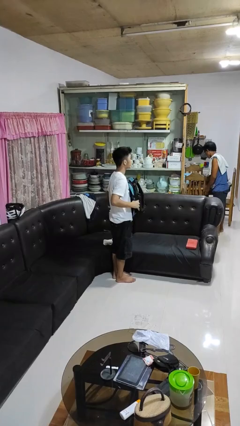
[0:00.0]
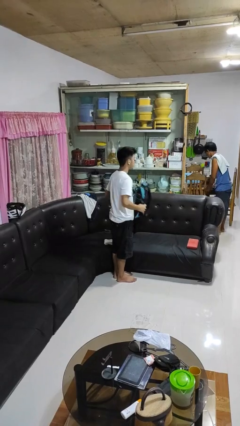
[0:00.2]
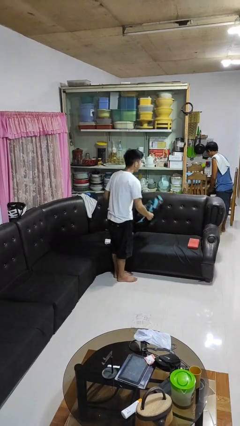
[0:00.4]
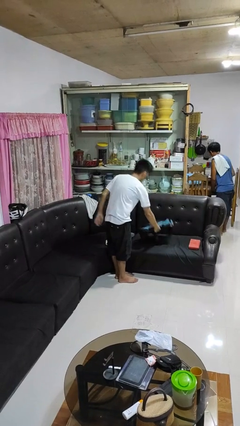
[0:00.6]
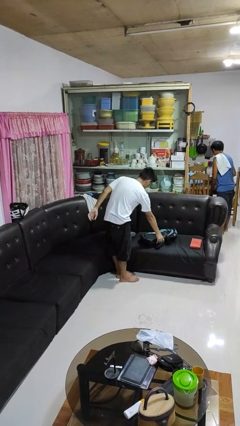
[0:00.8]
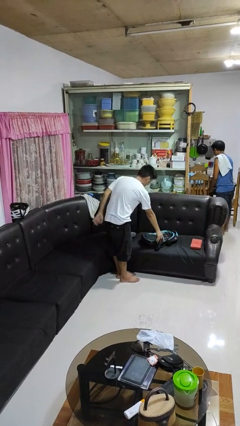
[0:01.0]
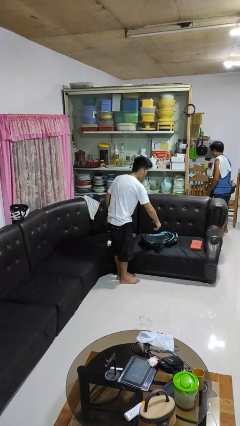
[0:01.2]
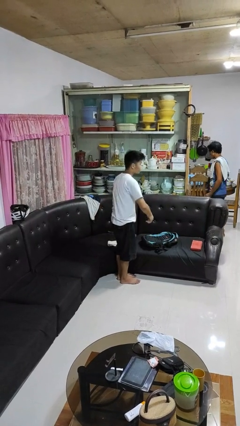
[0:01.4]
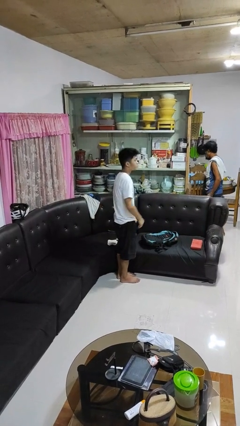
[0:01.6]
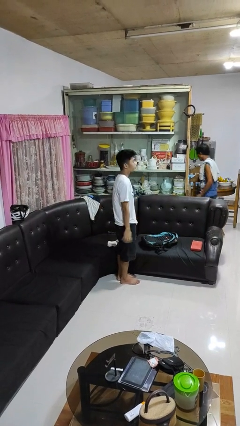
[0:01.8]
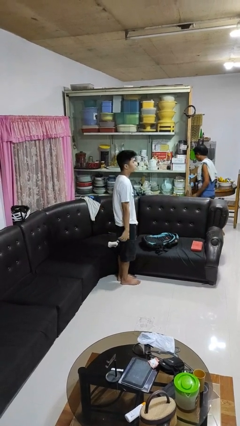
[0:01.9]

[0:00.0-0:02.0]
person picks up object from couch

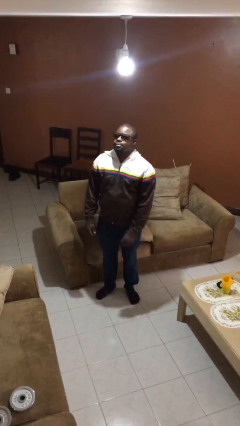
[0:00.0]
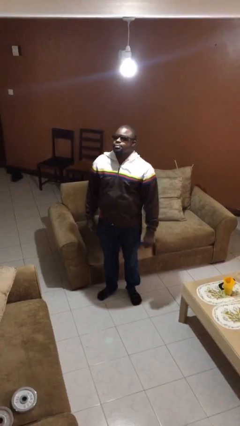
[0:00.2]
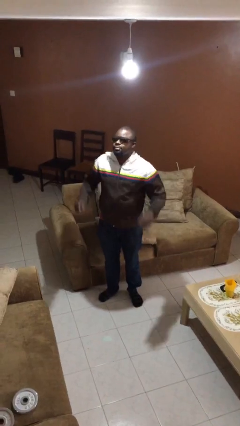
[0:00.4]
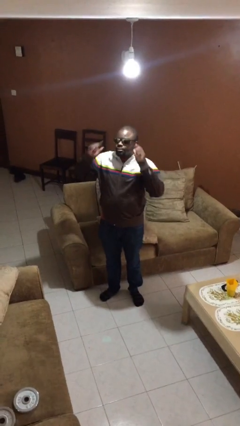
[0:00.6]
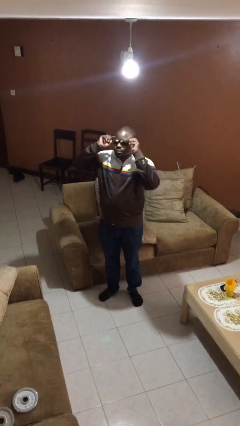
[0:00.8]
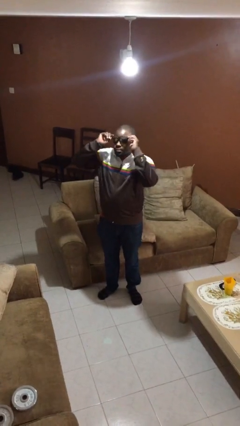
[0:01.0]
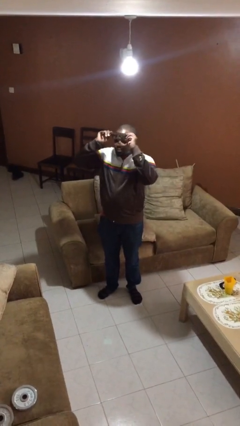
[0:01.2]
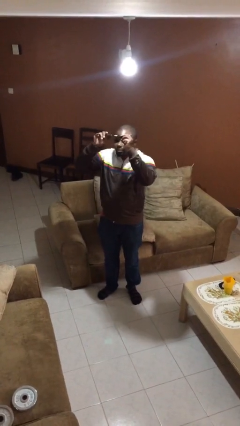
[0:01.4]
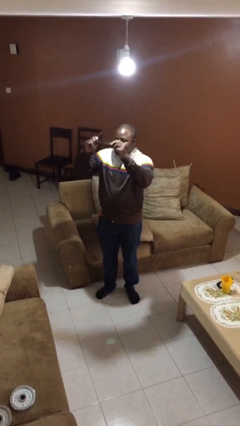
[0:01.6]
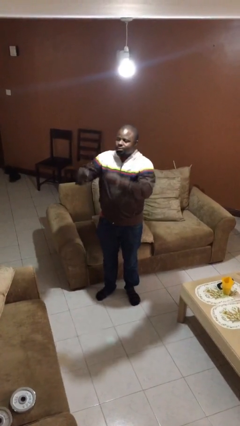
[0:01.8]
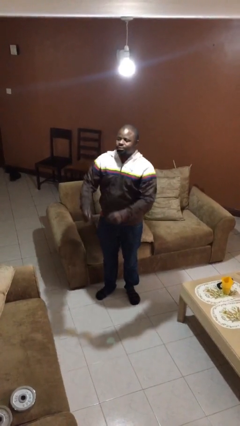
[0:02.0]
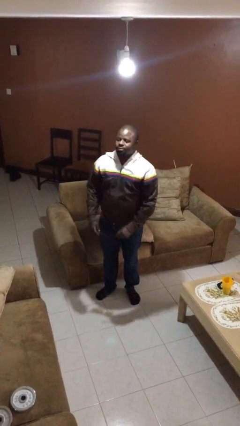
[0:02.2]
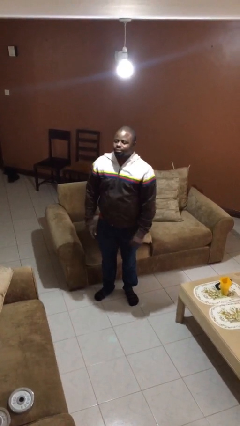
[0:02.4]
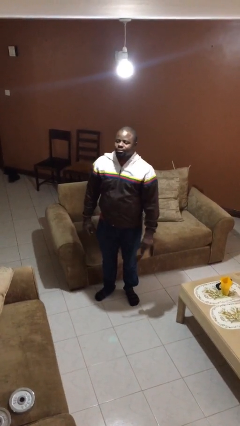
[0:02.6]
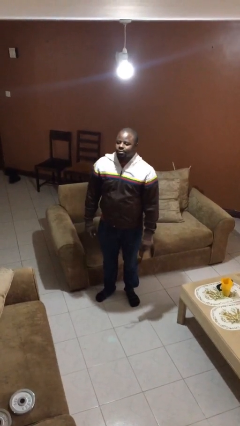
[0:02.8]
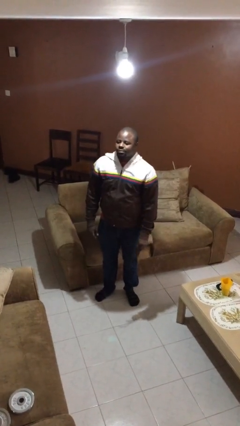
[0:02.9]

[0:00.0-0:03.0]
person takes off sunglasses

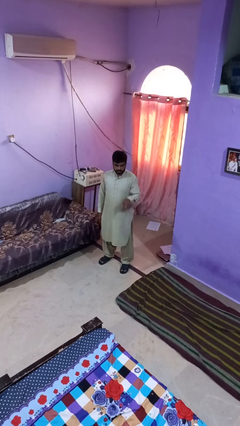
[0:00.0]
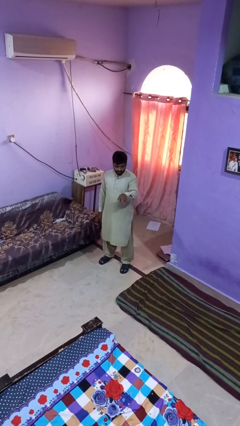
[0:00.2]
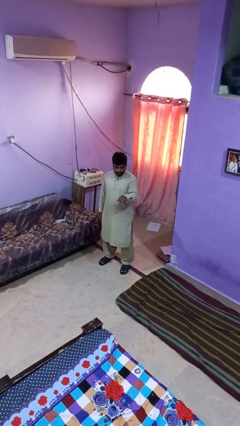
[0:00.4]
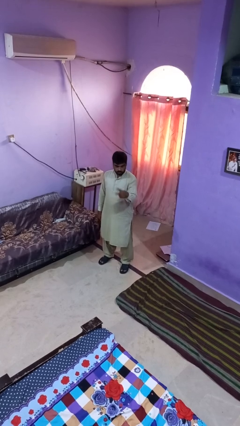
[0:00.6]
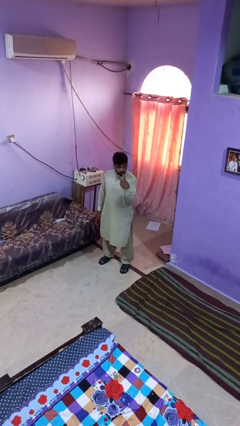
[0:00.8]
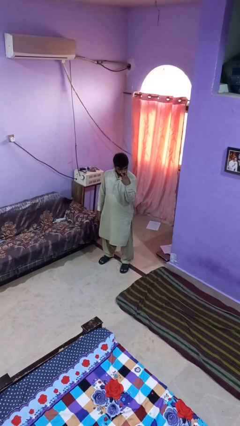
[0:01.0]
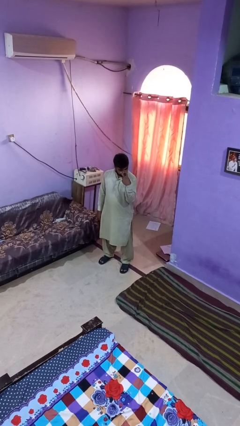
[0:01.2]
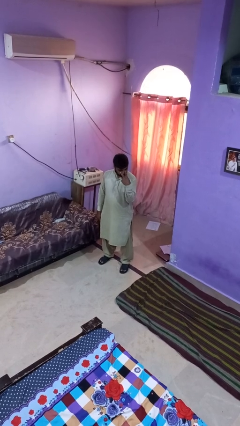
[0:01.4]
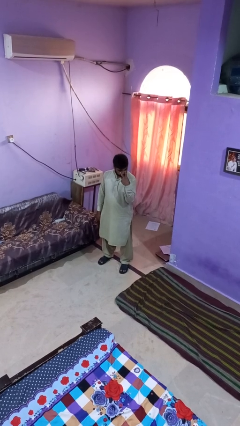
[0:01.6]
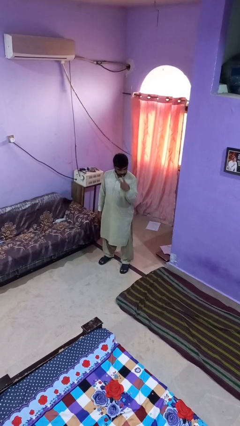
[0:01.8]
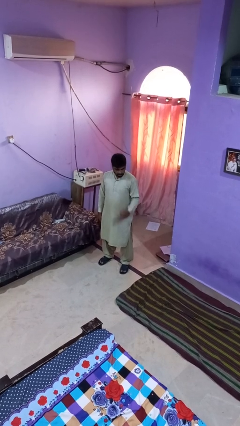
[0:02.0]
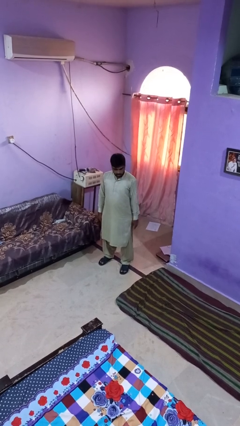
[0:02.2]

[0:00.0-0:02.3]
person gestures watch closely

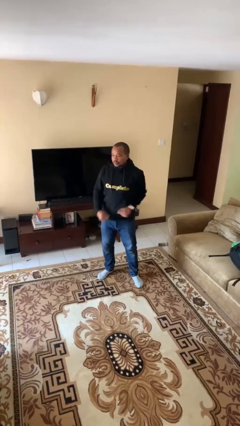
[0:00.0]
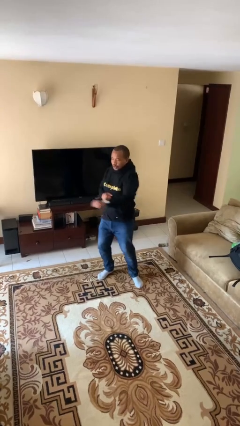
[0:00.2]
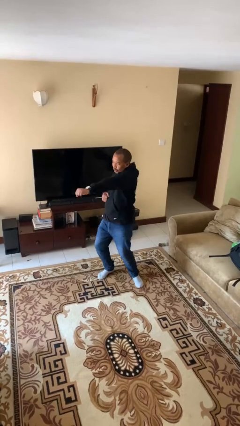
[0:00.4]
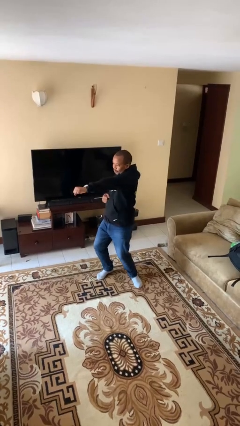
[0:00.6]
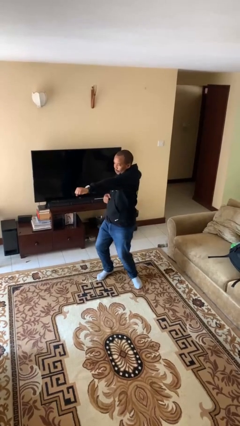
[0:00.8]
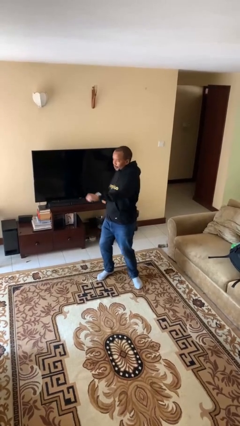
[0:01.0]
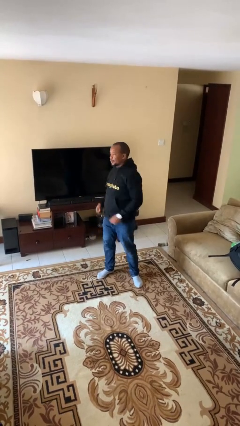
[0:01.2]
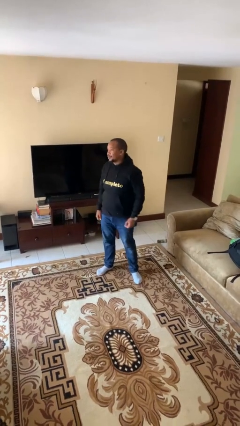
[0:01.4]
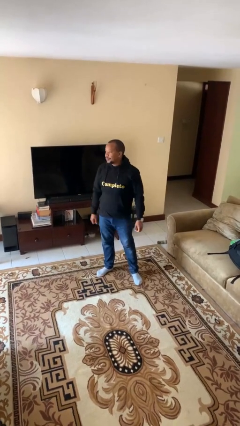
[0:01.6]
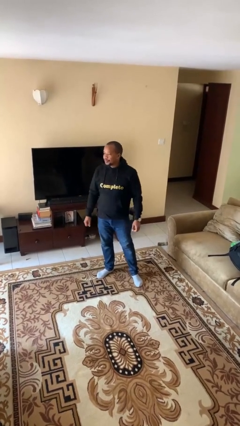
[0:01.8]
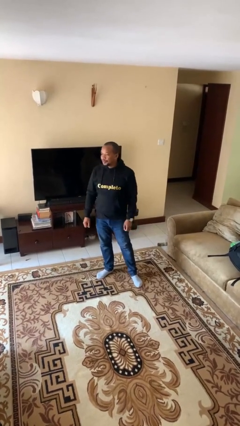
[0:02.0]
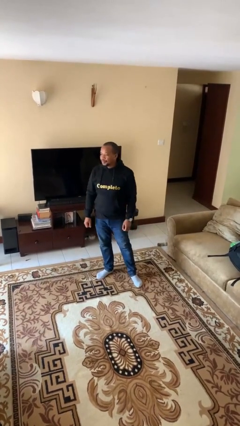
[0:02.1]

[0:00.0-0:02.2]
person punches

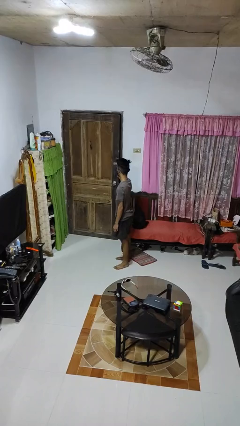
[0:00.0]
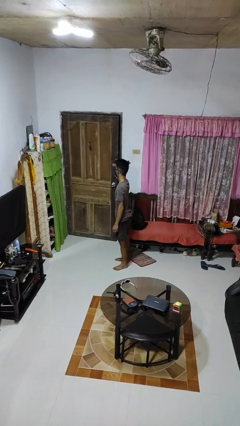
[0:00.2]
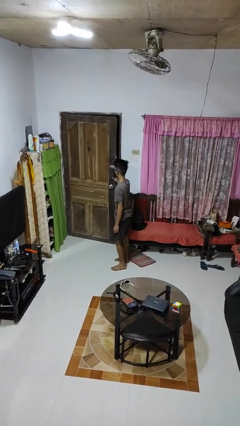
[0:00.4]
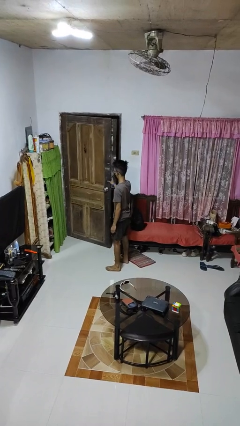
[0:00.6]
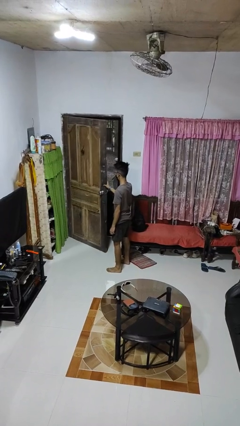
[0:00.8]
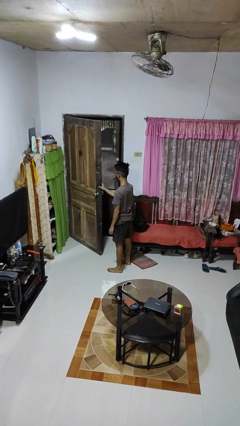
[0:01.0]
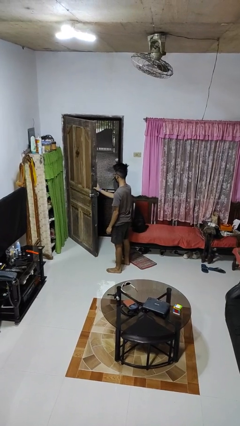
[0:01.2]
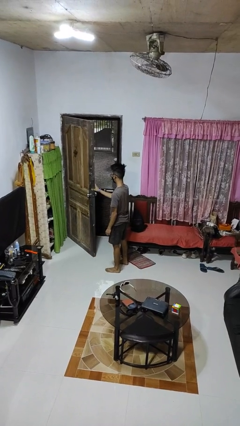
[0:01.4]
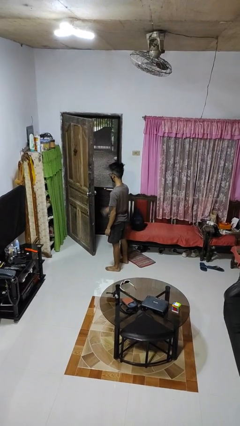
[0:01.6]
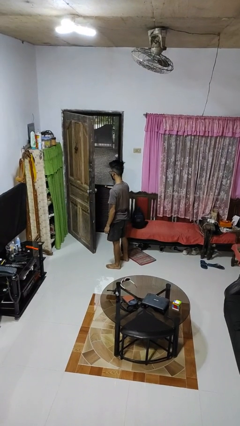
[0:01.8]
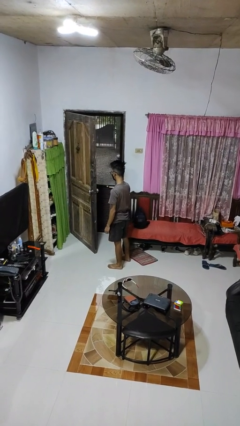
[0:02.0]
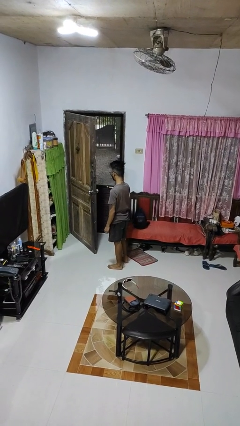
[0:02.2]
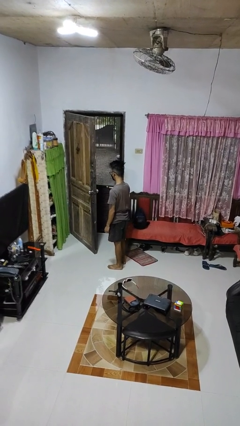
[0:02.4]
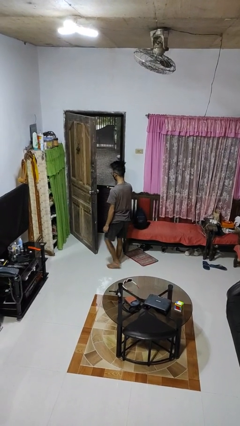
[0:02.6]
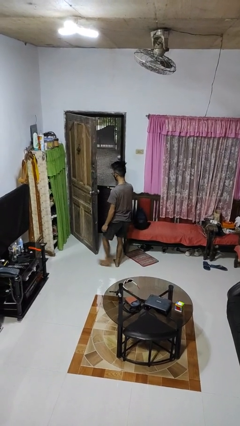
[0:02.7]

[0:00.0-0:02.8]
person opens facility door

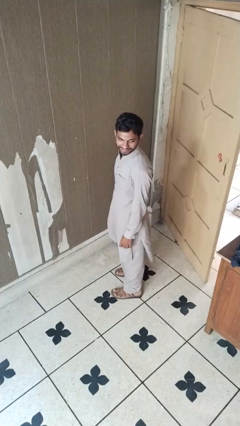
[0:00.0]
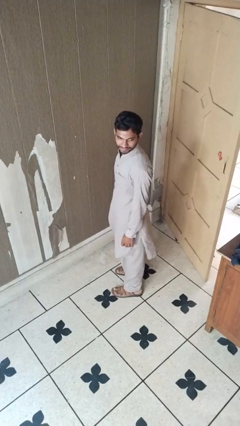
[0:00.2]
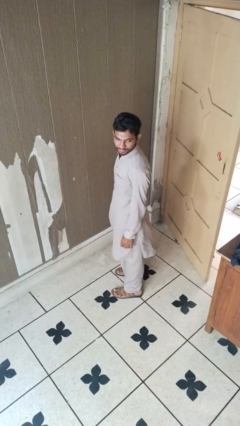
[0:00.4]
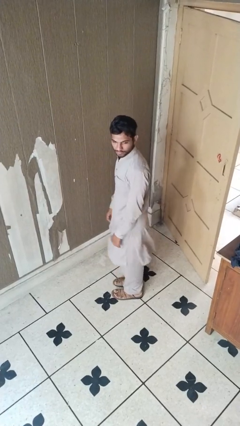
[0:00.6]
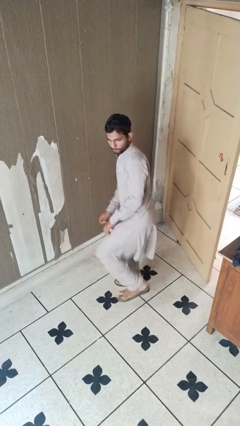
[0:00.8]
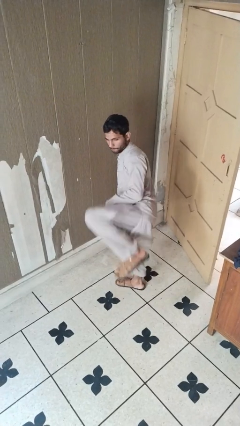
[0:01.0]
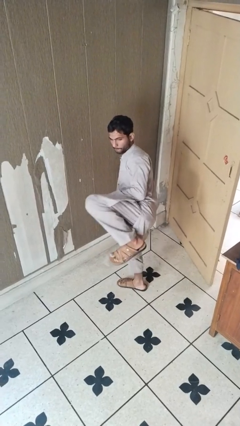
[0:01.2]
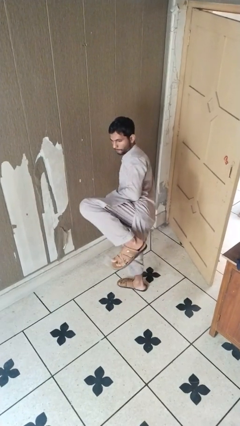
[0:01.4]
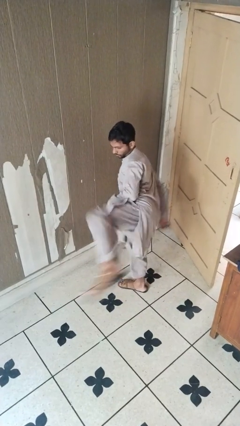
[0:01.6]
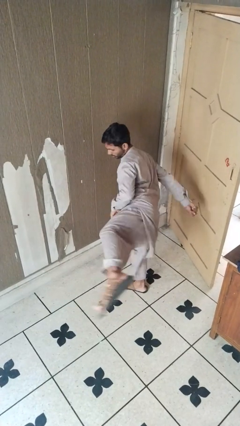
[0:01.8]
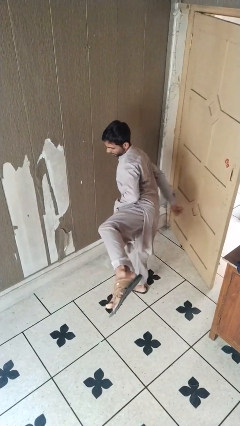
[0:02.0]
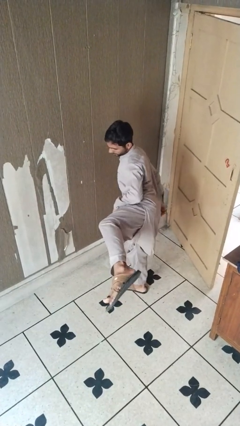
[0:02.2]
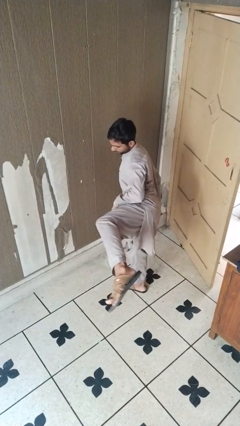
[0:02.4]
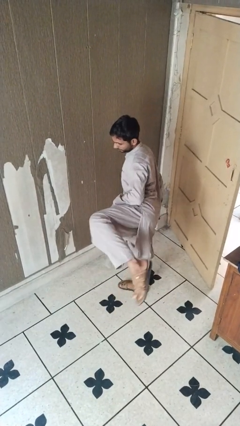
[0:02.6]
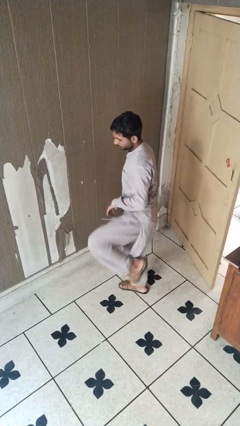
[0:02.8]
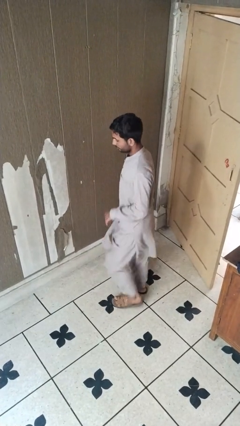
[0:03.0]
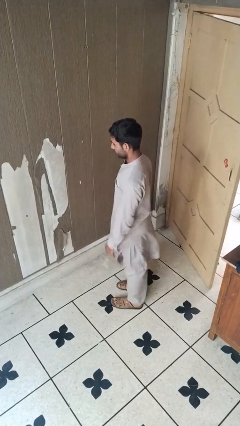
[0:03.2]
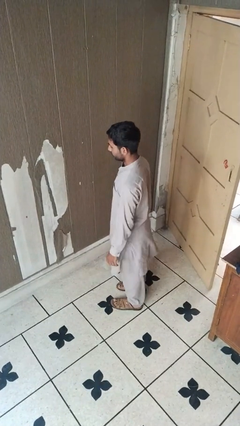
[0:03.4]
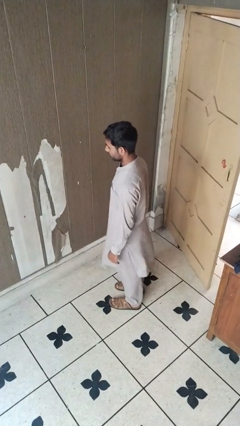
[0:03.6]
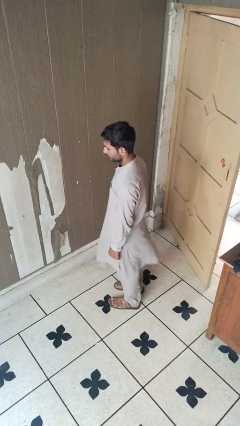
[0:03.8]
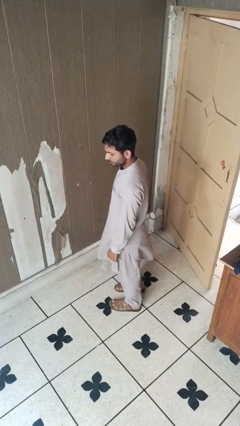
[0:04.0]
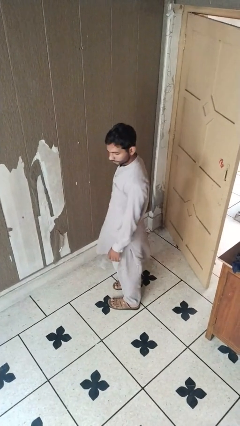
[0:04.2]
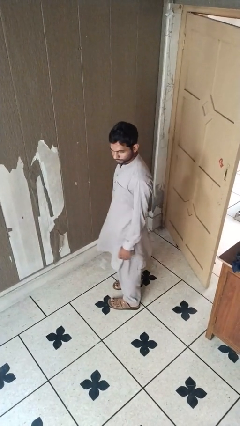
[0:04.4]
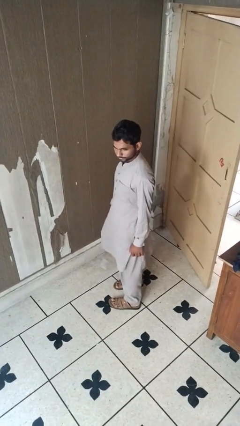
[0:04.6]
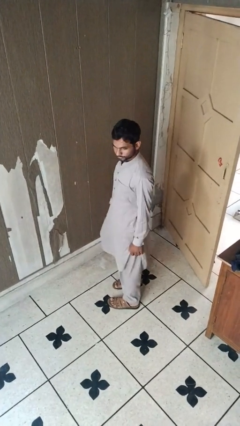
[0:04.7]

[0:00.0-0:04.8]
person karate kicks

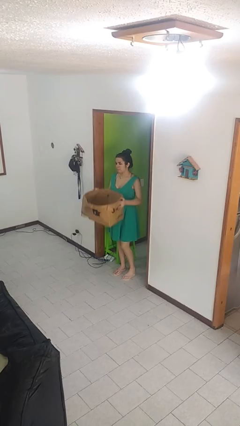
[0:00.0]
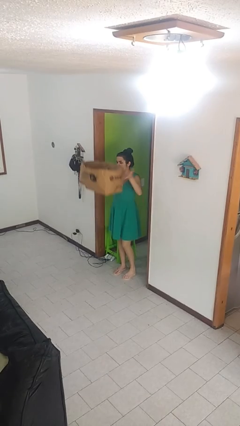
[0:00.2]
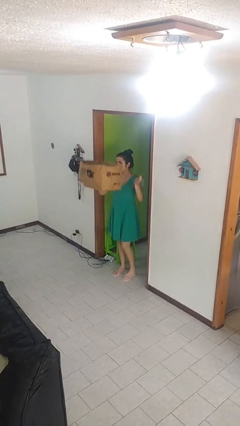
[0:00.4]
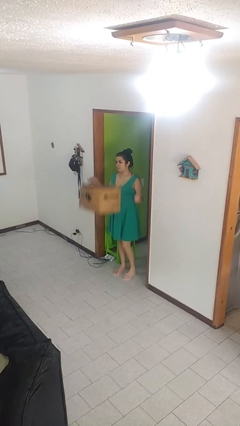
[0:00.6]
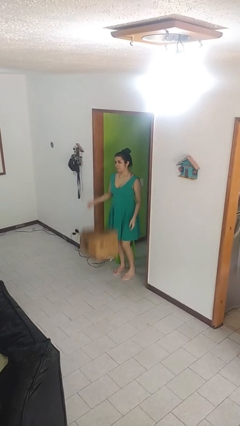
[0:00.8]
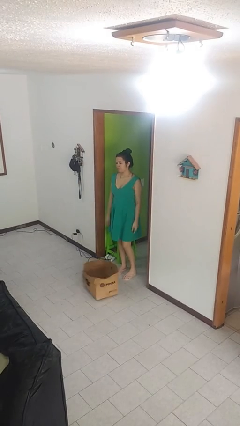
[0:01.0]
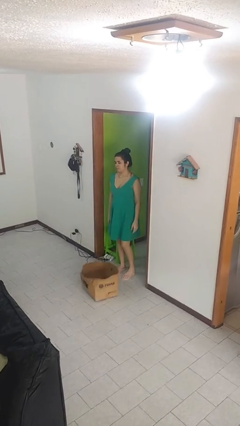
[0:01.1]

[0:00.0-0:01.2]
person throws object into air
